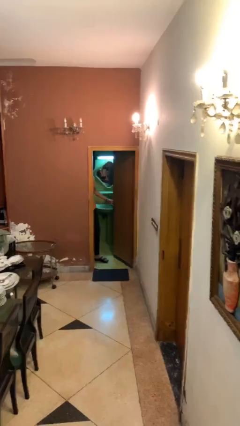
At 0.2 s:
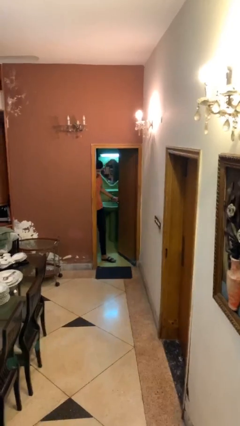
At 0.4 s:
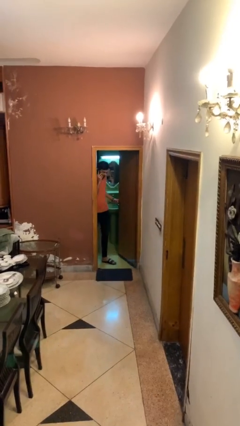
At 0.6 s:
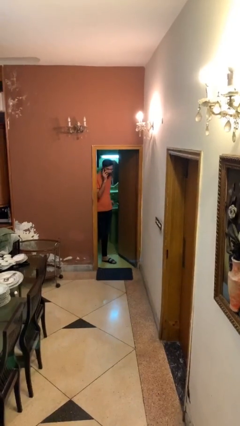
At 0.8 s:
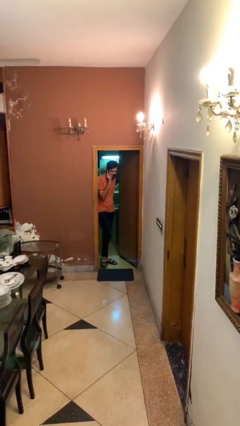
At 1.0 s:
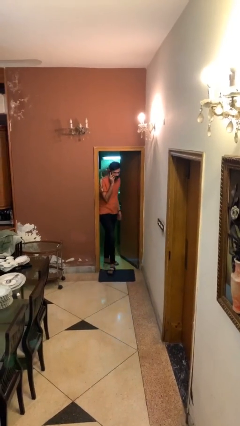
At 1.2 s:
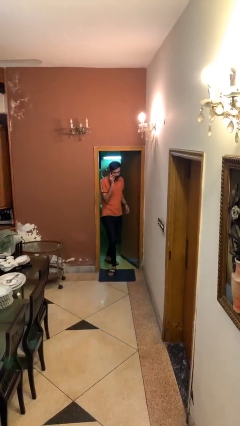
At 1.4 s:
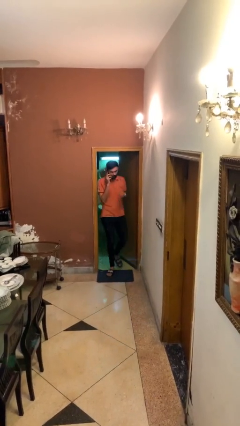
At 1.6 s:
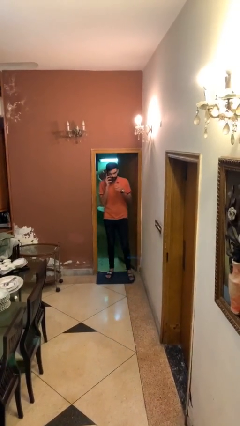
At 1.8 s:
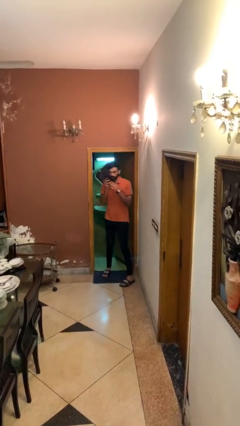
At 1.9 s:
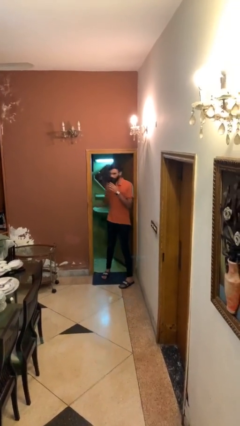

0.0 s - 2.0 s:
person enters scene through structure

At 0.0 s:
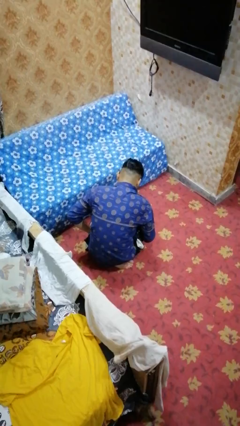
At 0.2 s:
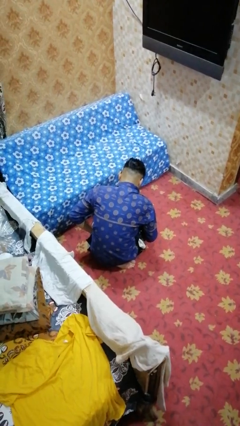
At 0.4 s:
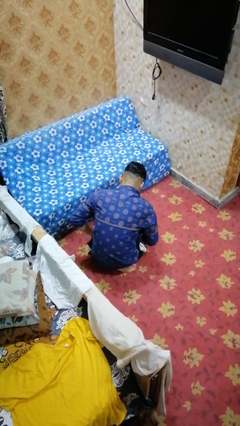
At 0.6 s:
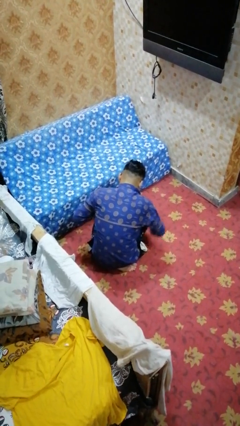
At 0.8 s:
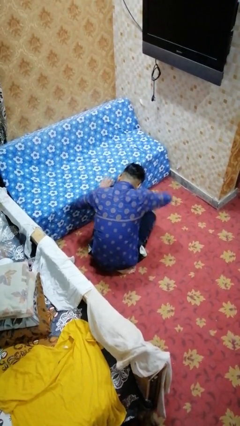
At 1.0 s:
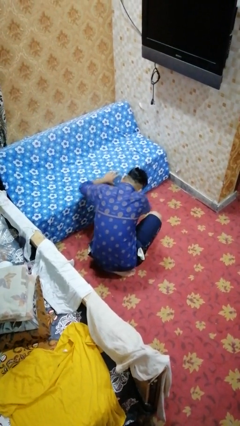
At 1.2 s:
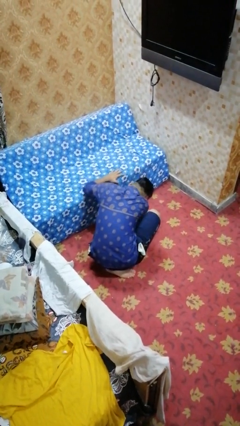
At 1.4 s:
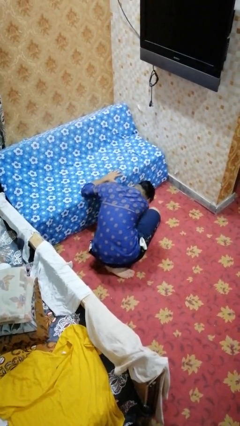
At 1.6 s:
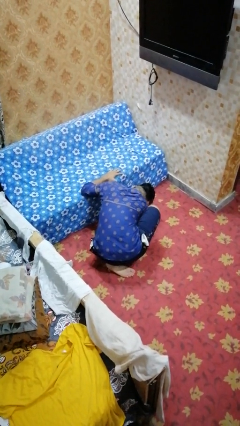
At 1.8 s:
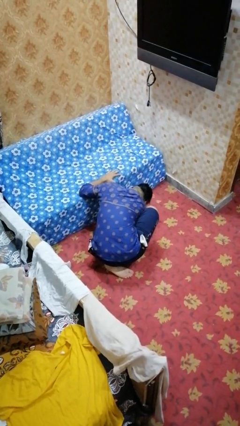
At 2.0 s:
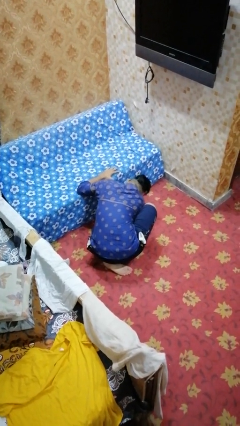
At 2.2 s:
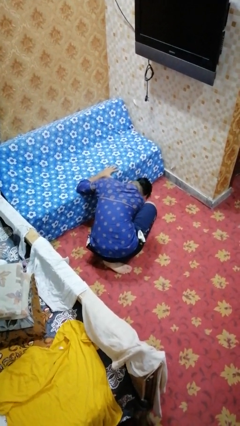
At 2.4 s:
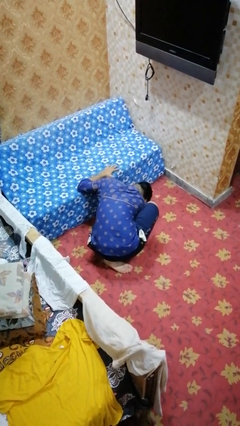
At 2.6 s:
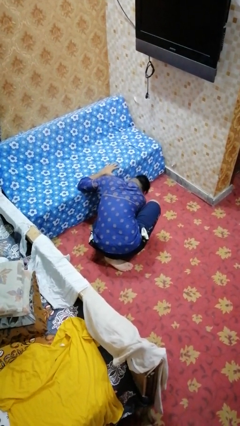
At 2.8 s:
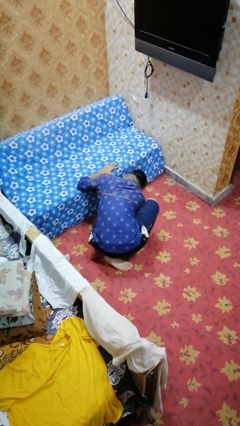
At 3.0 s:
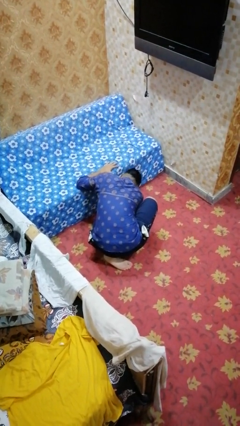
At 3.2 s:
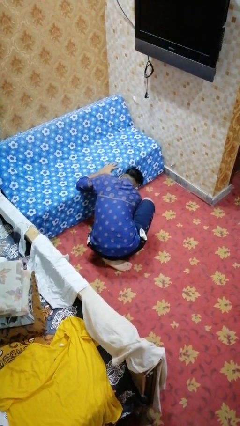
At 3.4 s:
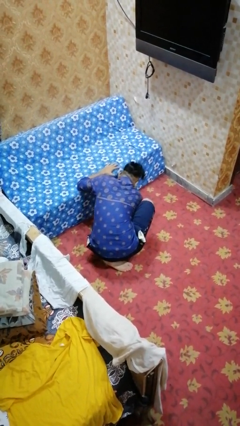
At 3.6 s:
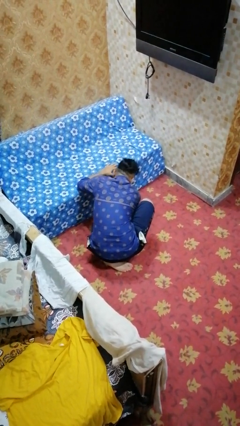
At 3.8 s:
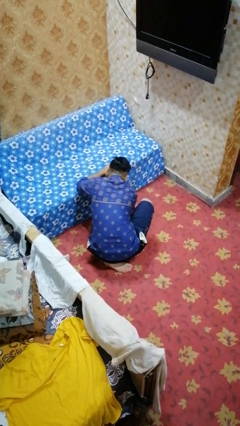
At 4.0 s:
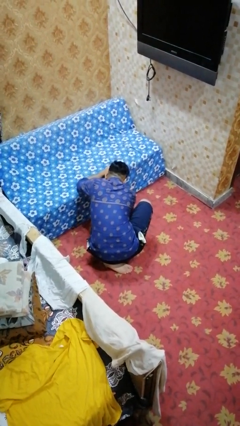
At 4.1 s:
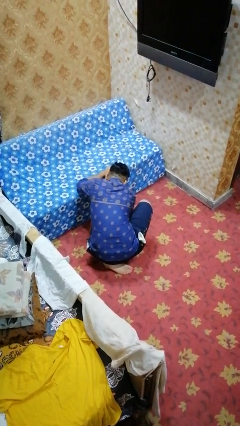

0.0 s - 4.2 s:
person searches under couch

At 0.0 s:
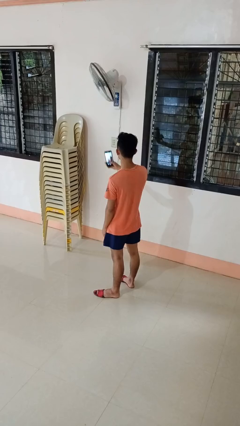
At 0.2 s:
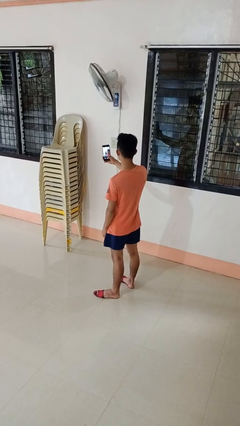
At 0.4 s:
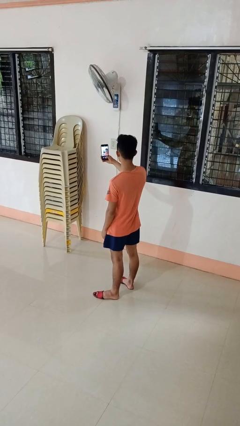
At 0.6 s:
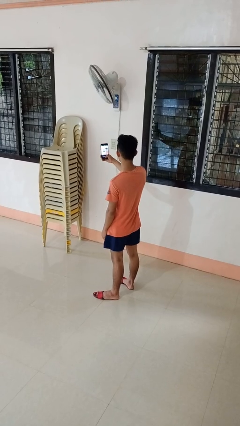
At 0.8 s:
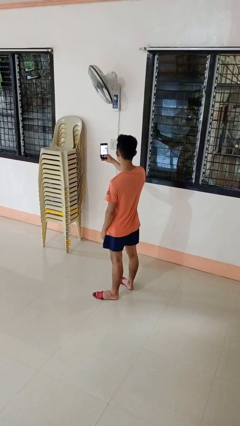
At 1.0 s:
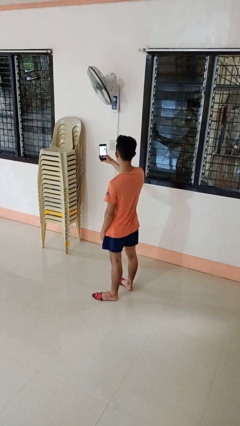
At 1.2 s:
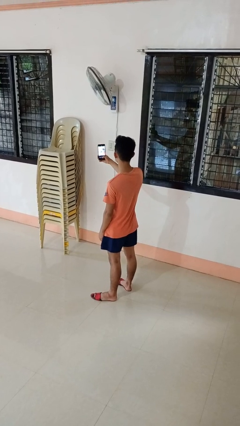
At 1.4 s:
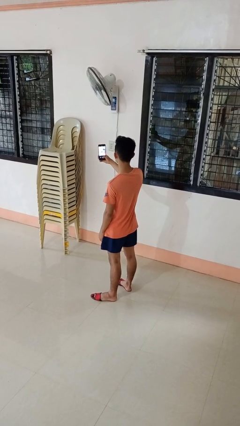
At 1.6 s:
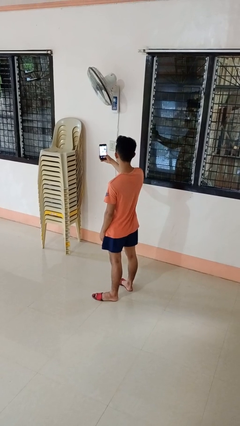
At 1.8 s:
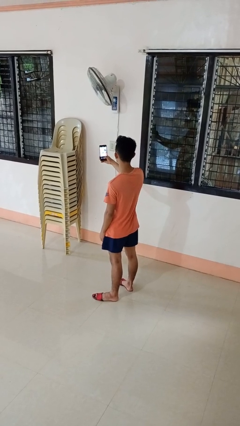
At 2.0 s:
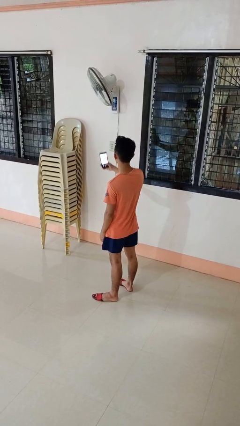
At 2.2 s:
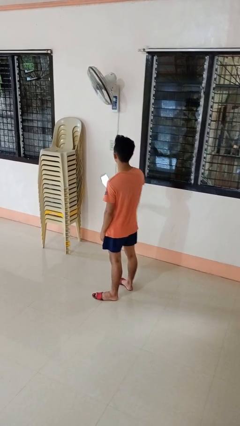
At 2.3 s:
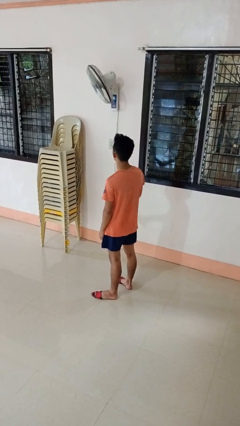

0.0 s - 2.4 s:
person takes selfie

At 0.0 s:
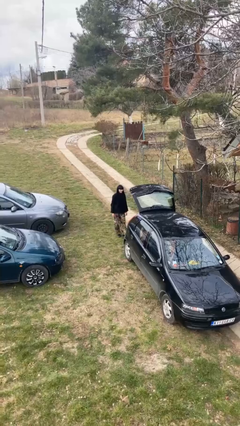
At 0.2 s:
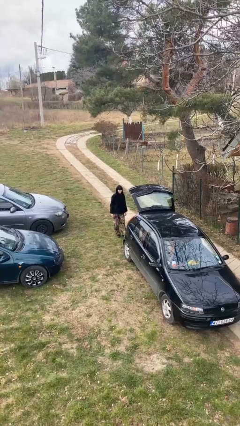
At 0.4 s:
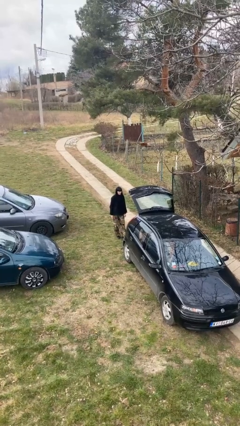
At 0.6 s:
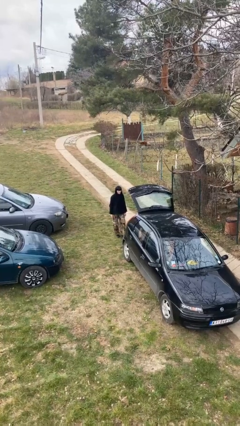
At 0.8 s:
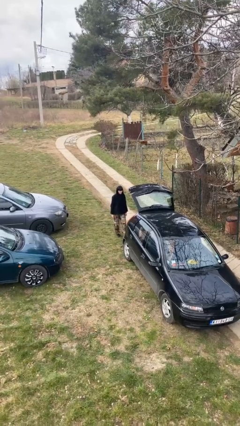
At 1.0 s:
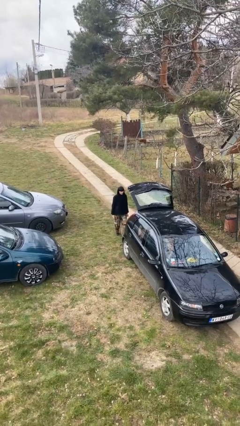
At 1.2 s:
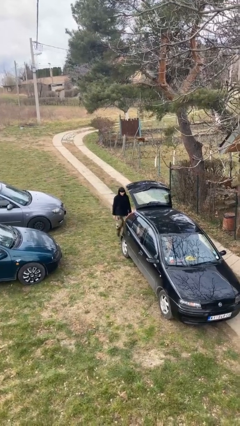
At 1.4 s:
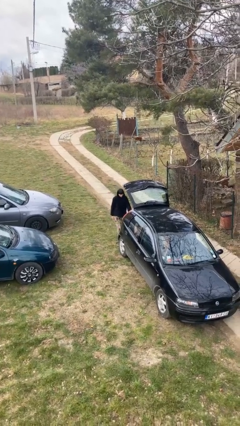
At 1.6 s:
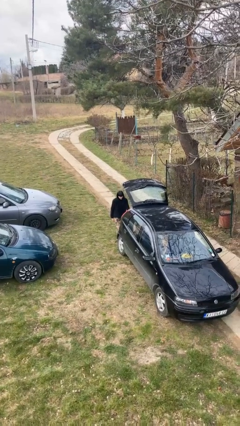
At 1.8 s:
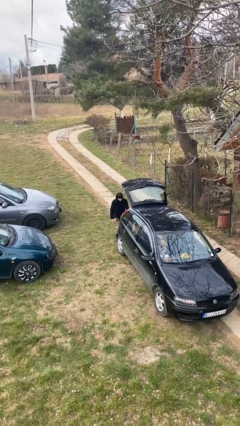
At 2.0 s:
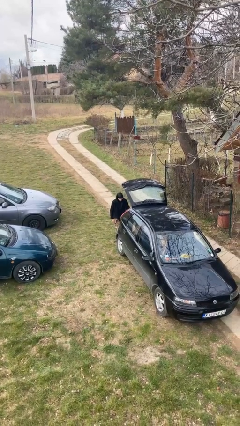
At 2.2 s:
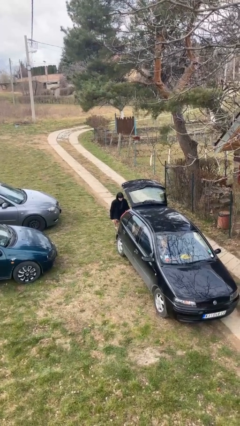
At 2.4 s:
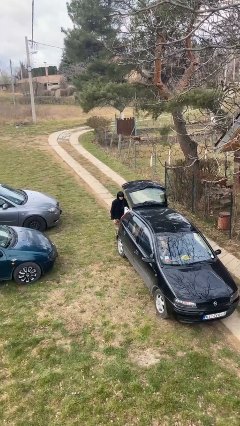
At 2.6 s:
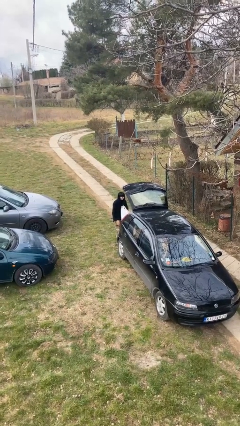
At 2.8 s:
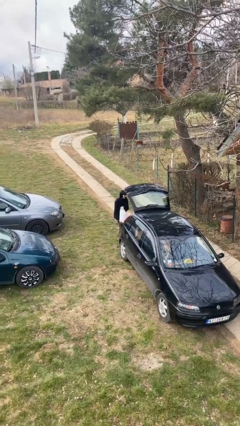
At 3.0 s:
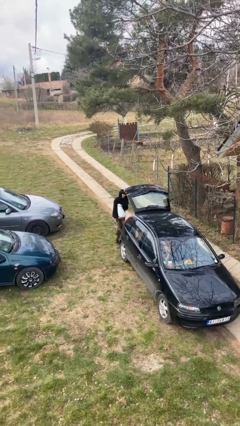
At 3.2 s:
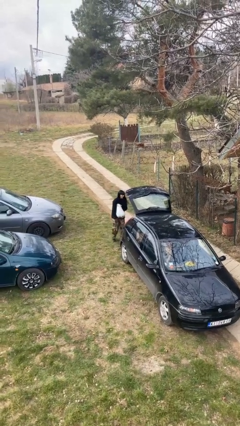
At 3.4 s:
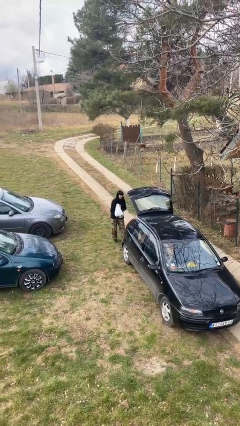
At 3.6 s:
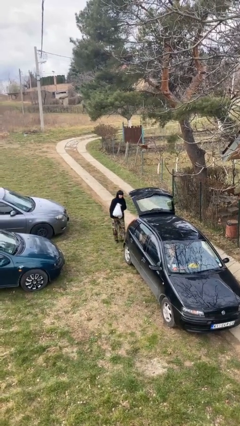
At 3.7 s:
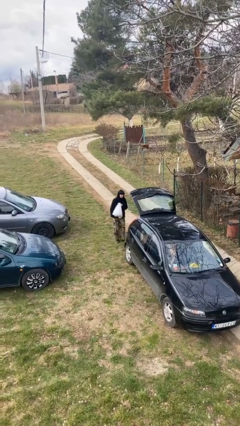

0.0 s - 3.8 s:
person unloads car

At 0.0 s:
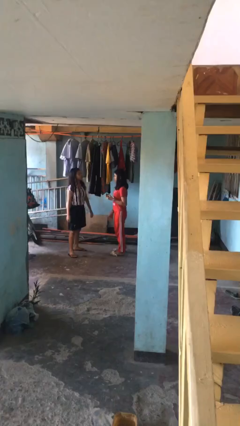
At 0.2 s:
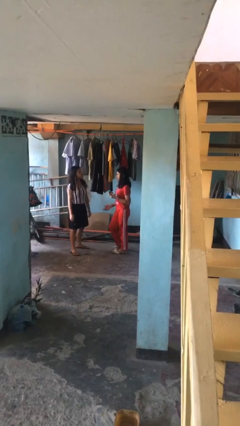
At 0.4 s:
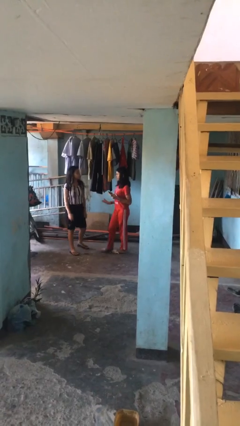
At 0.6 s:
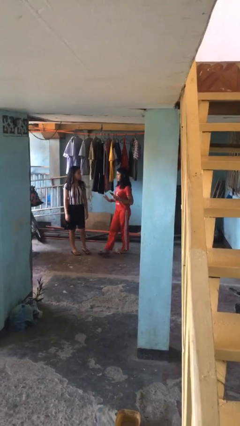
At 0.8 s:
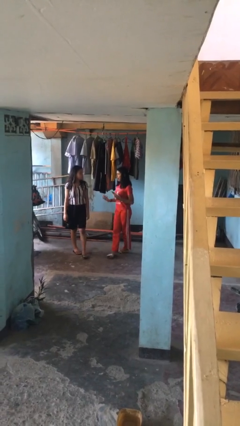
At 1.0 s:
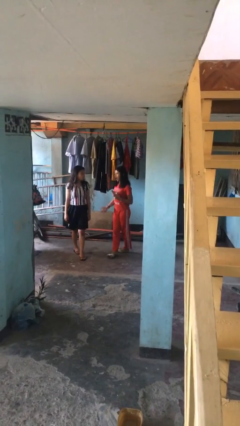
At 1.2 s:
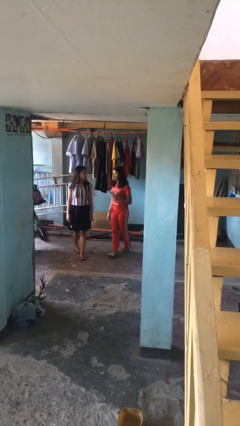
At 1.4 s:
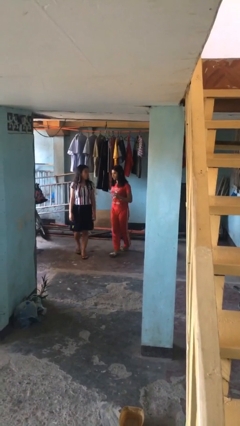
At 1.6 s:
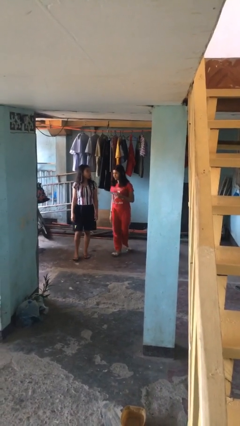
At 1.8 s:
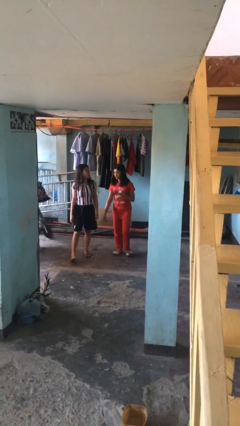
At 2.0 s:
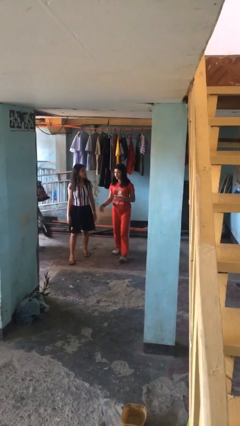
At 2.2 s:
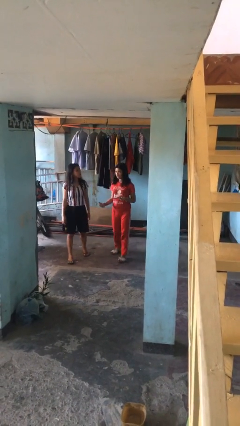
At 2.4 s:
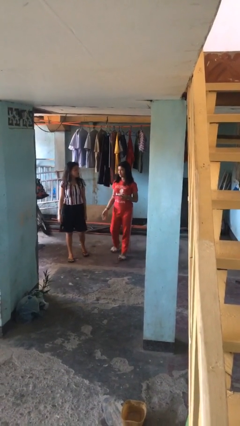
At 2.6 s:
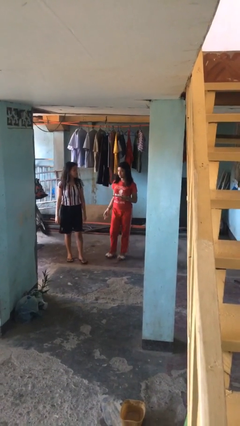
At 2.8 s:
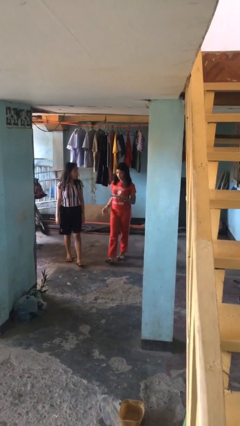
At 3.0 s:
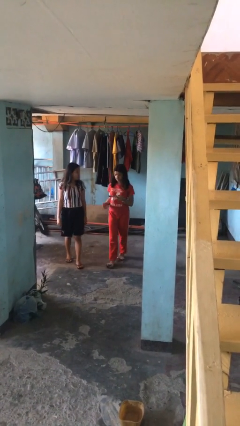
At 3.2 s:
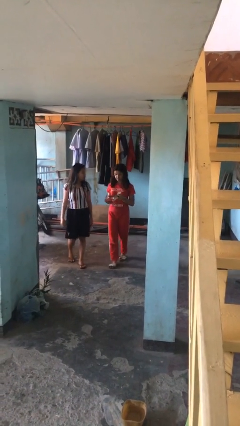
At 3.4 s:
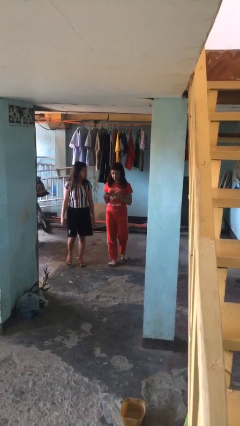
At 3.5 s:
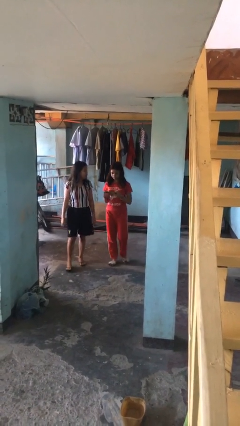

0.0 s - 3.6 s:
person talks to person

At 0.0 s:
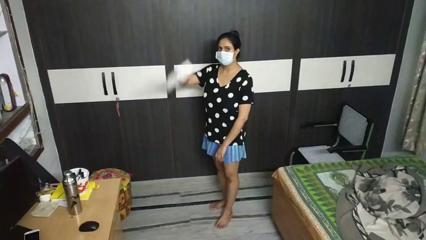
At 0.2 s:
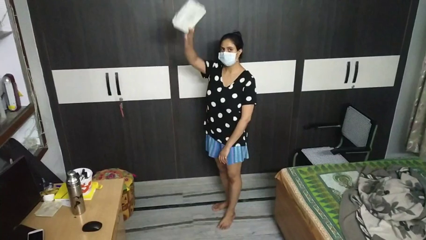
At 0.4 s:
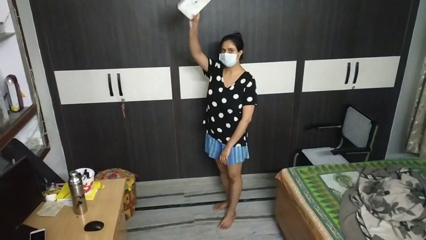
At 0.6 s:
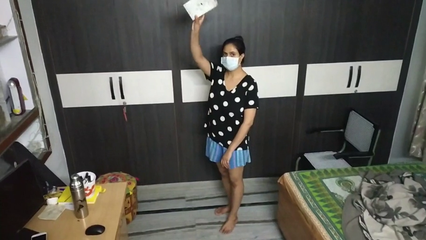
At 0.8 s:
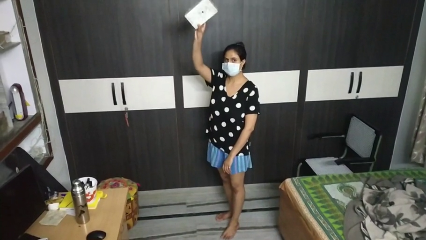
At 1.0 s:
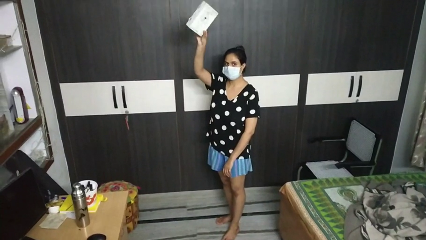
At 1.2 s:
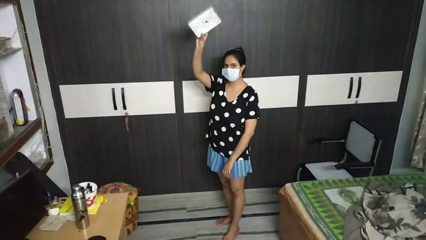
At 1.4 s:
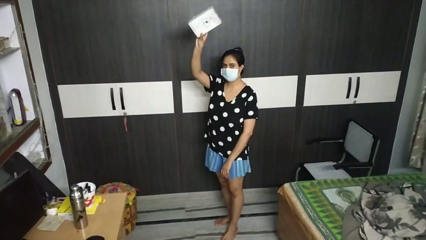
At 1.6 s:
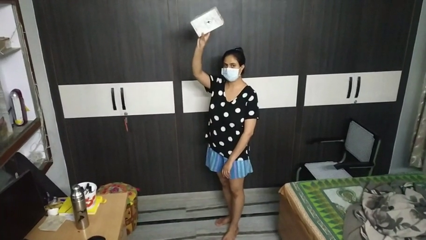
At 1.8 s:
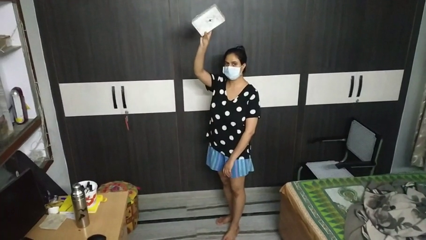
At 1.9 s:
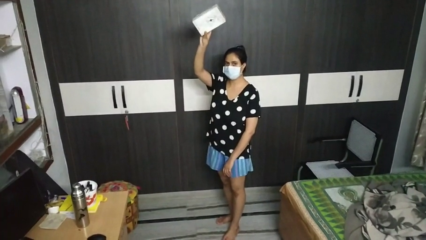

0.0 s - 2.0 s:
person holds object above head
